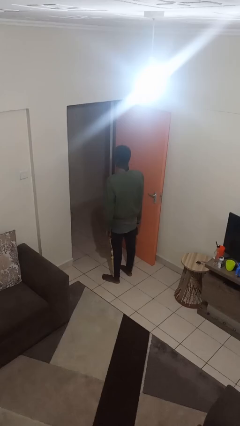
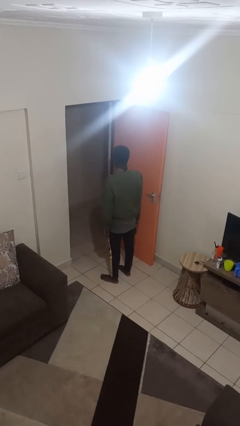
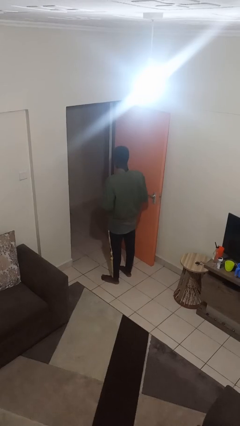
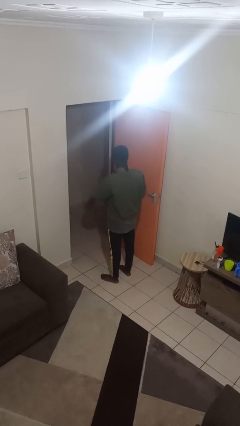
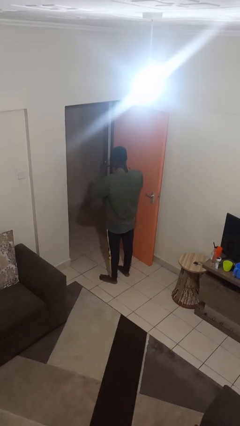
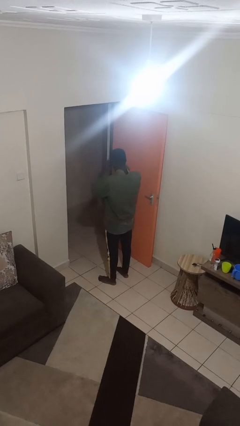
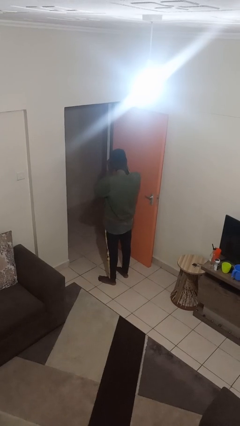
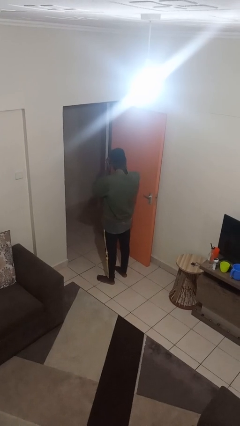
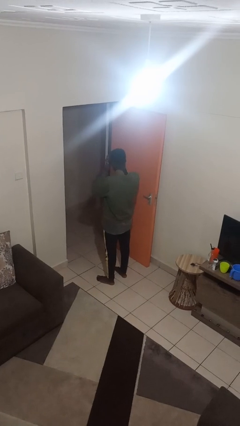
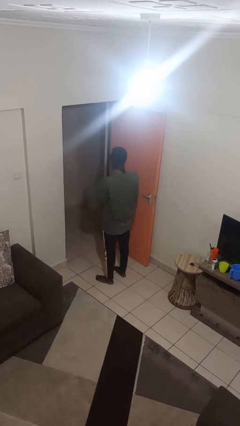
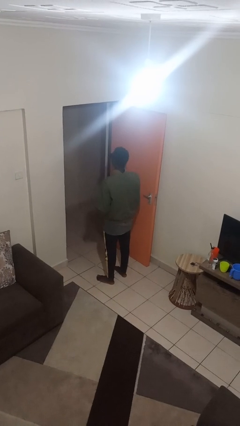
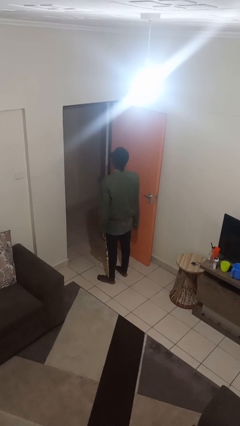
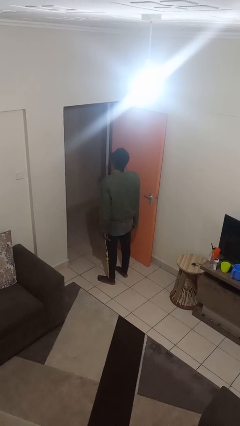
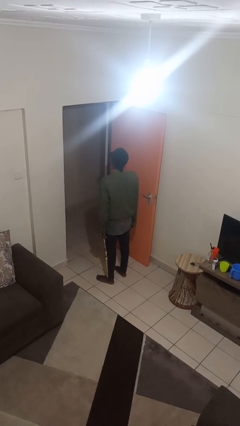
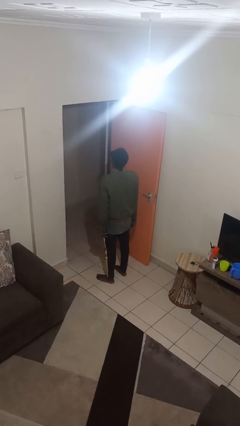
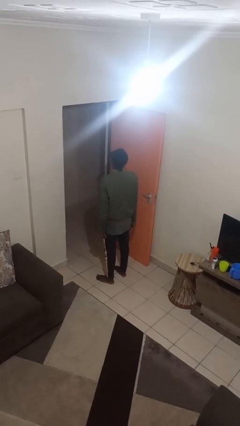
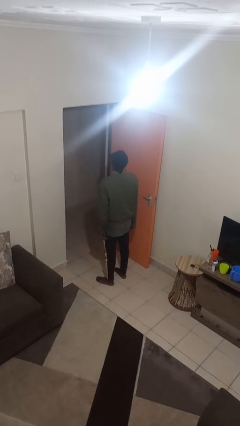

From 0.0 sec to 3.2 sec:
person puts on sunglasses

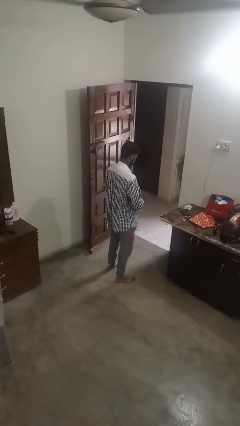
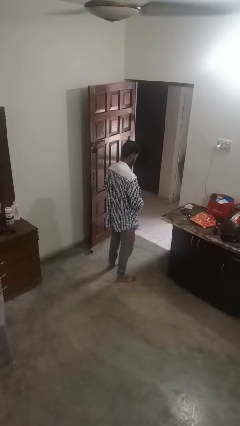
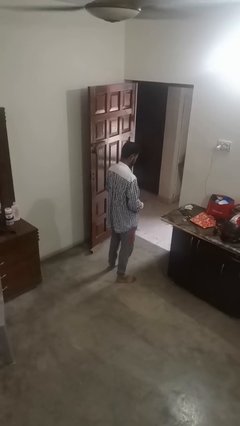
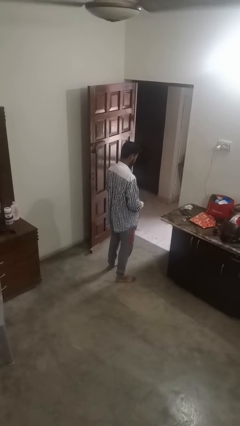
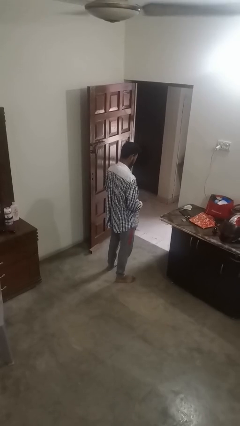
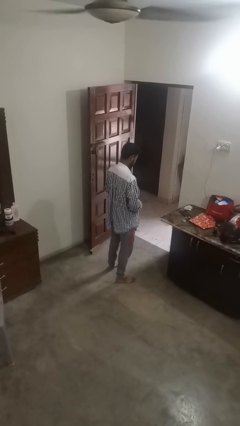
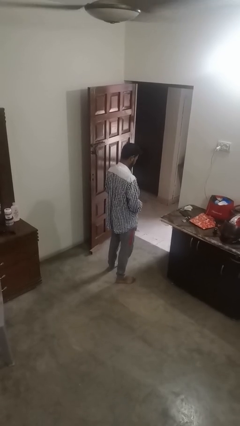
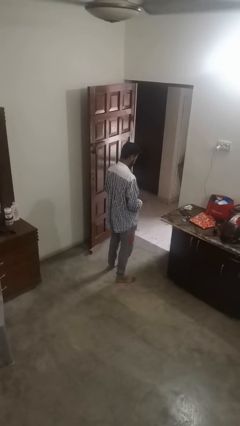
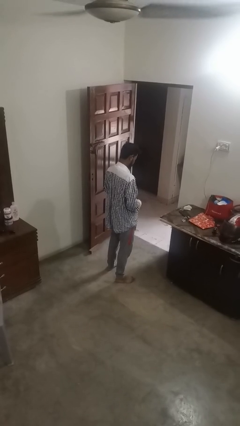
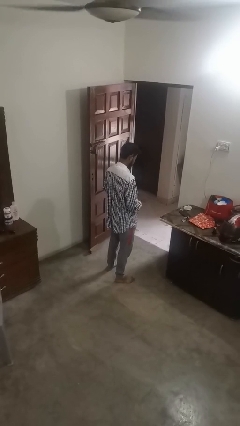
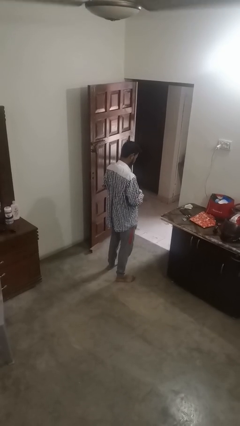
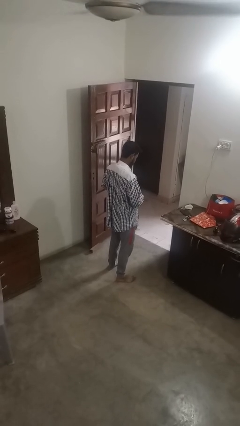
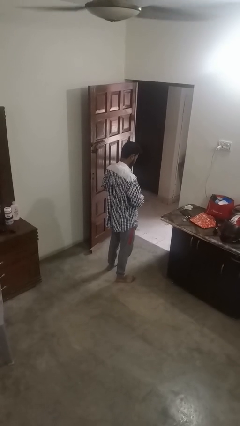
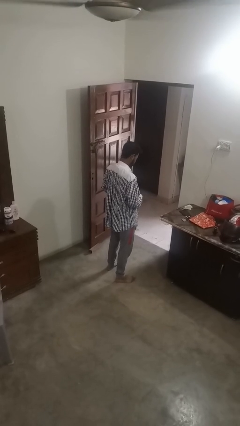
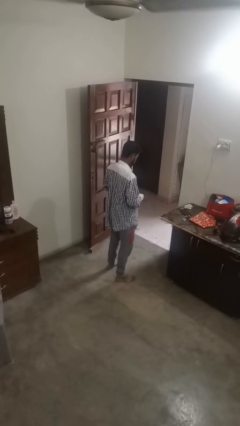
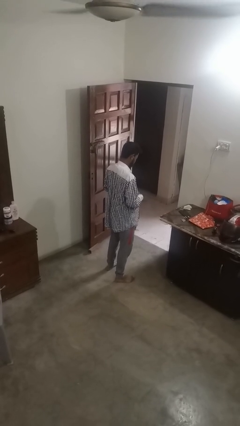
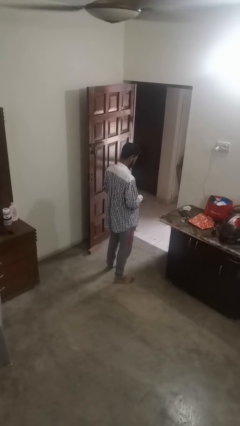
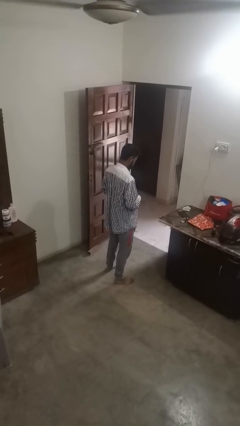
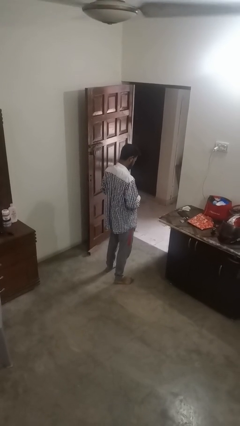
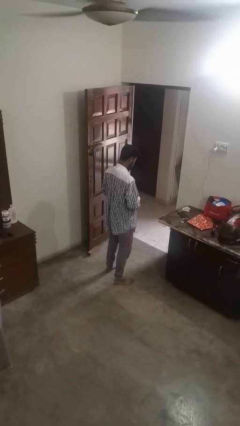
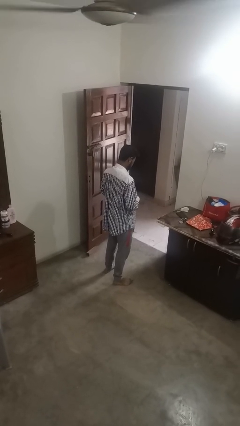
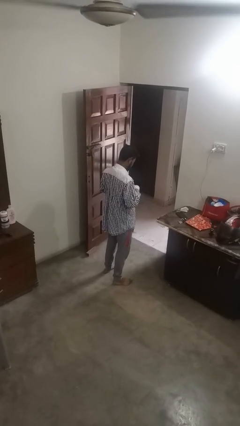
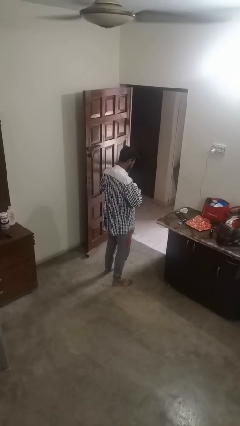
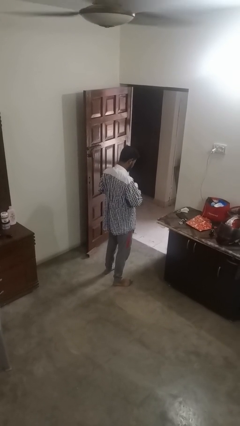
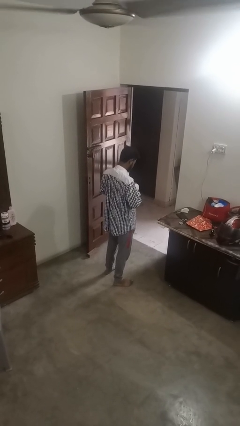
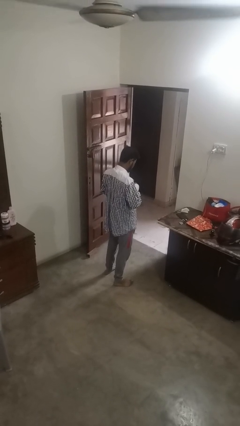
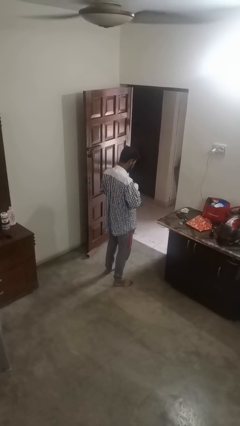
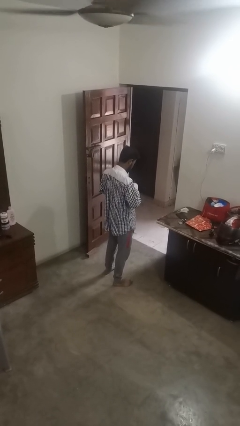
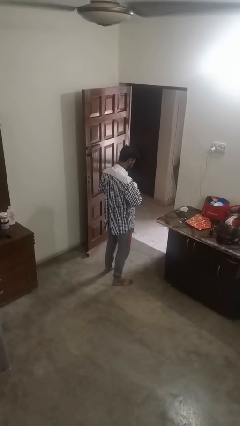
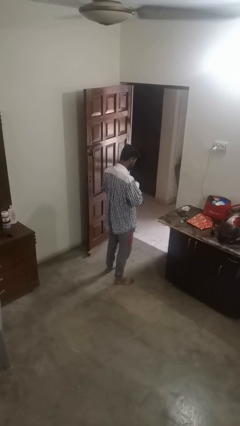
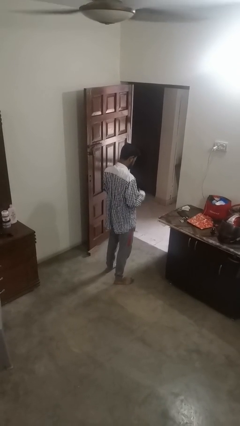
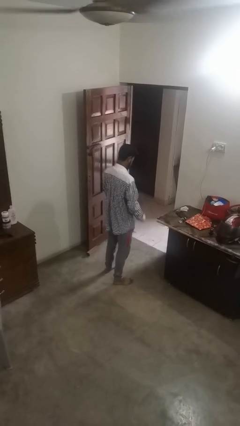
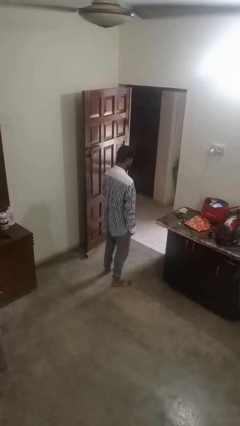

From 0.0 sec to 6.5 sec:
person buttons shirt

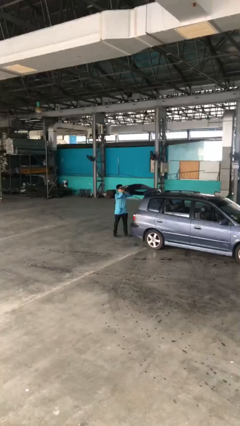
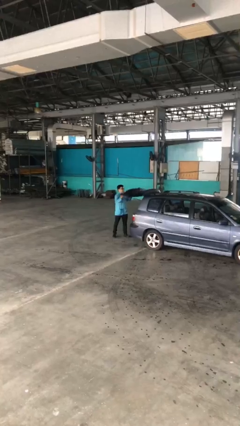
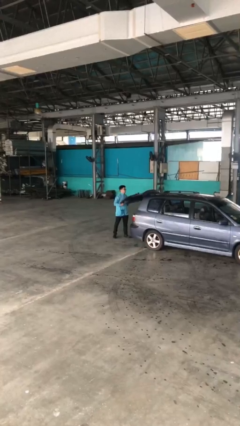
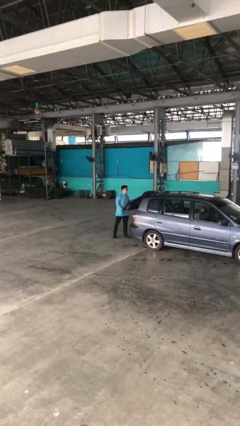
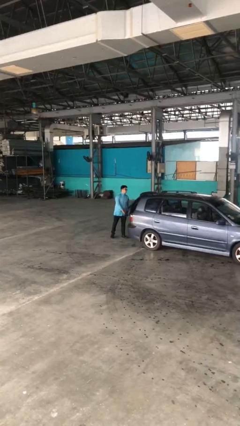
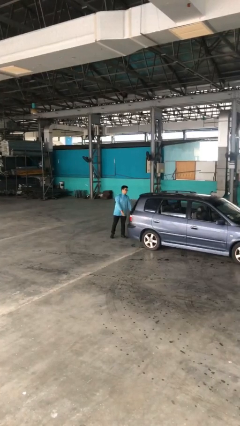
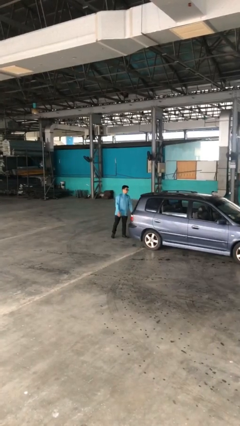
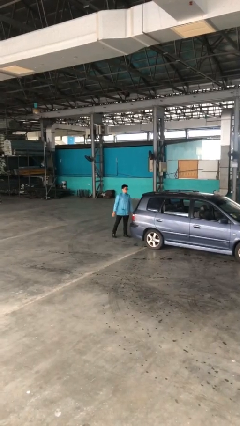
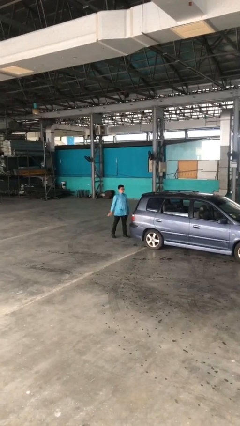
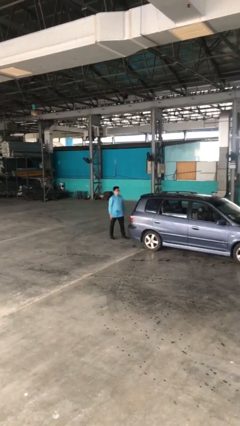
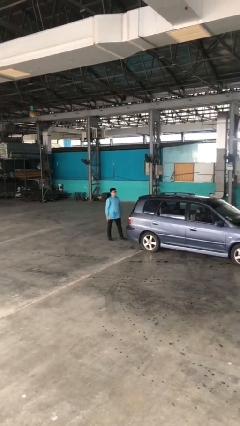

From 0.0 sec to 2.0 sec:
person closes car trunk

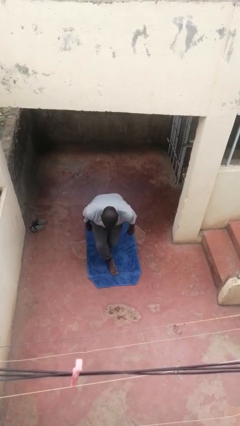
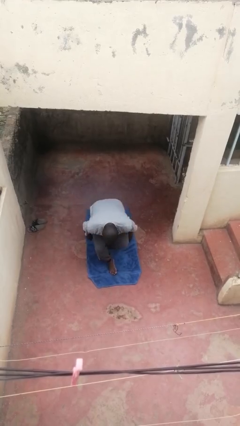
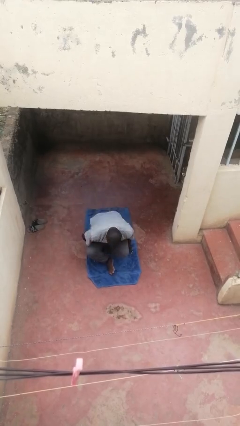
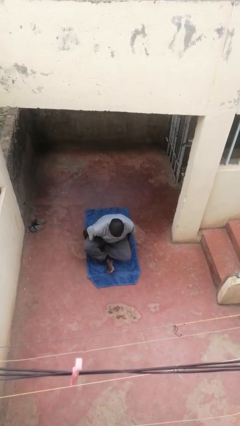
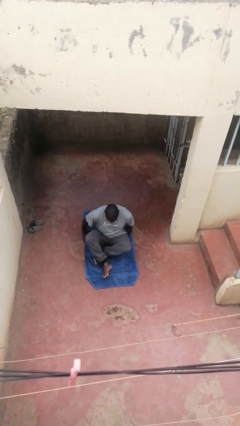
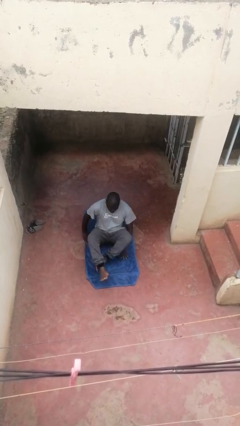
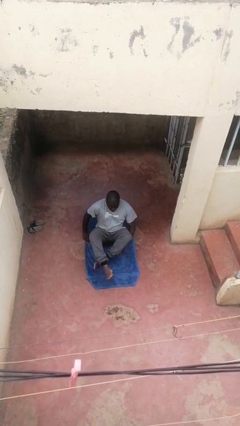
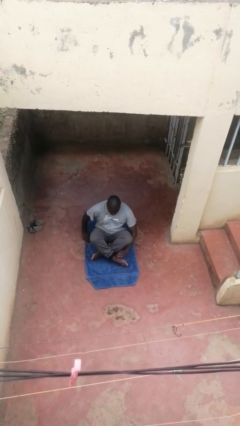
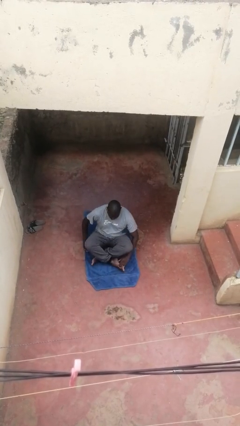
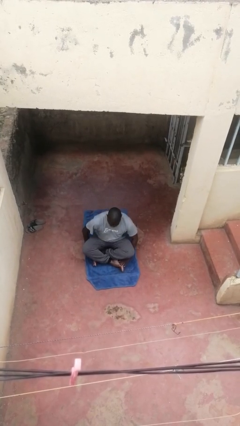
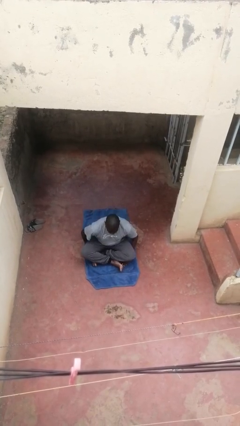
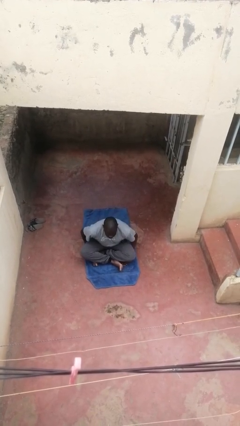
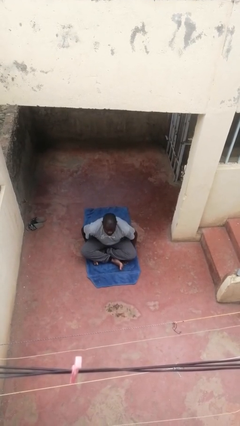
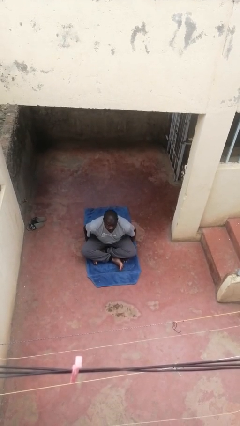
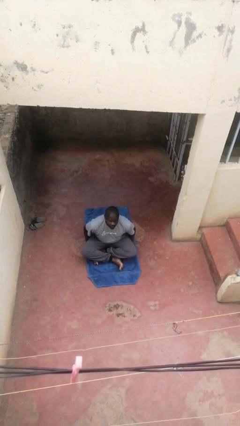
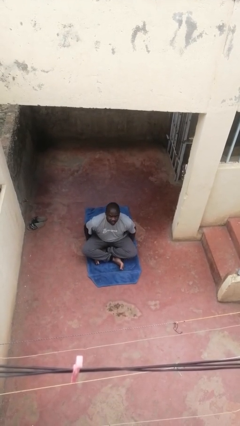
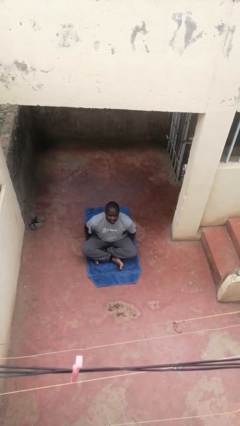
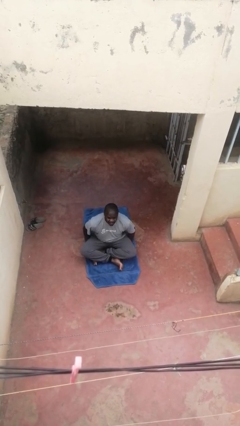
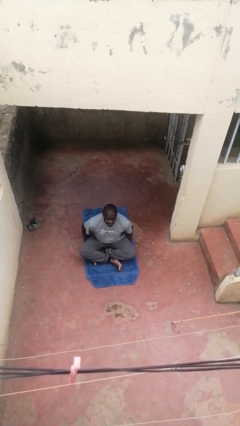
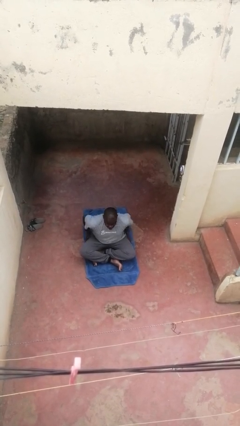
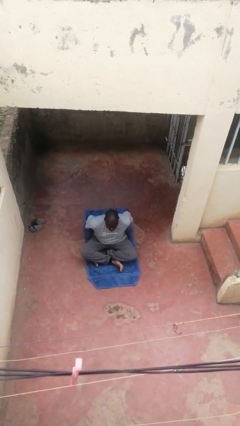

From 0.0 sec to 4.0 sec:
person sits crisscross

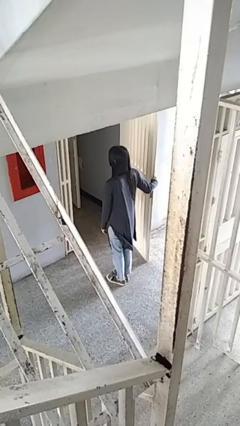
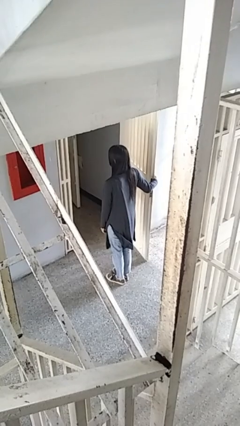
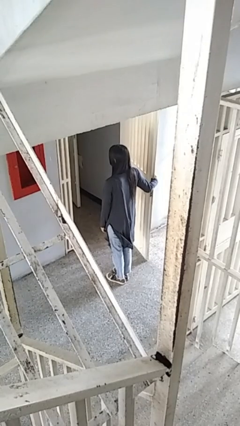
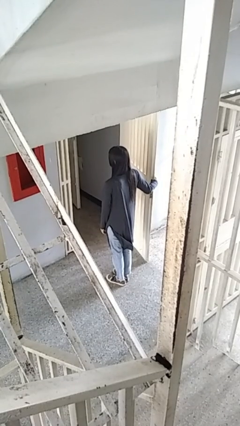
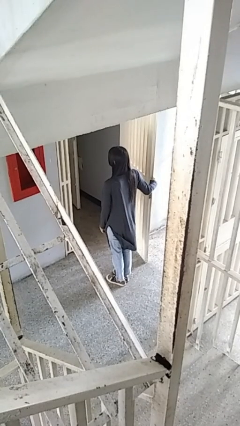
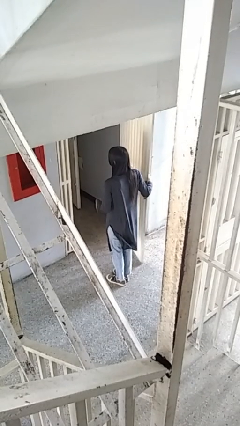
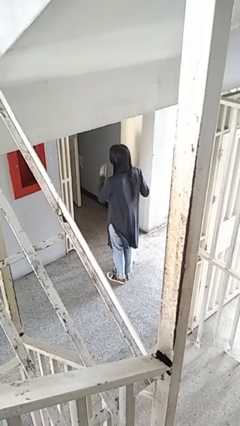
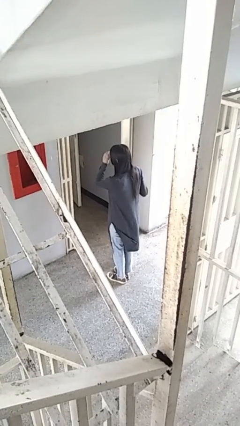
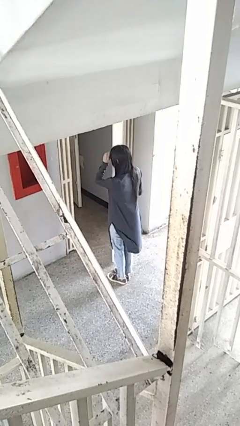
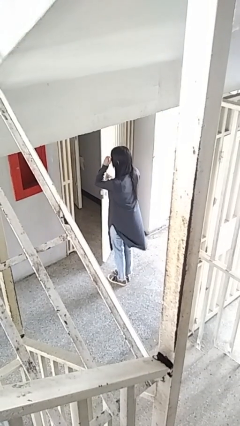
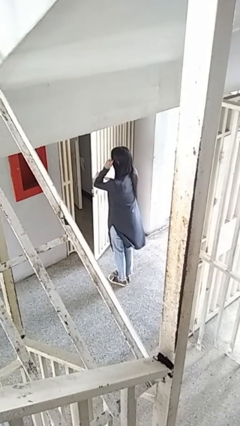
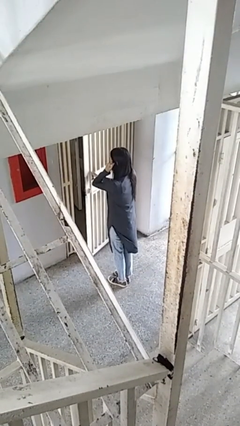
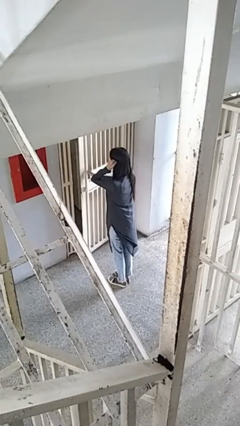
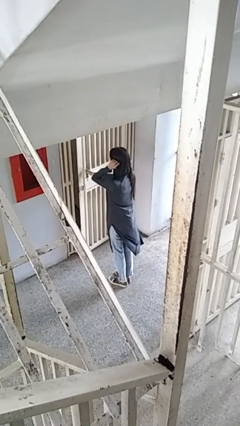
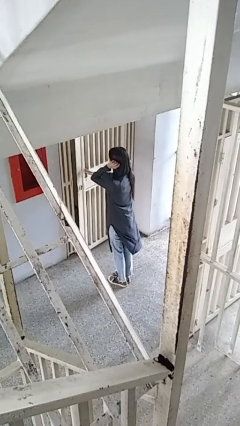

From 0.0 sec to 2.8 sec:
person closes gate
